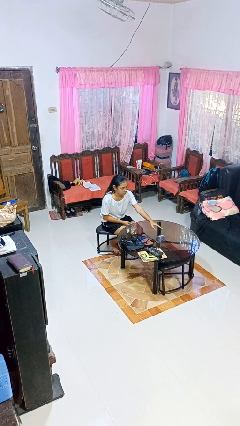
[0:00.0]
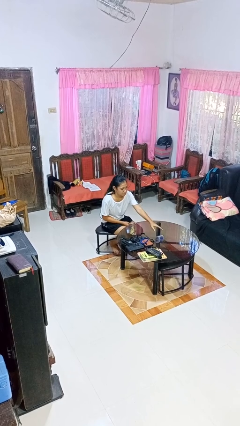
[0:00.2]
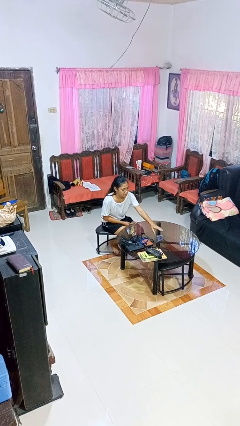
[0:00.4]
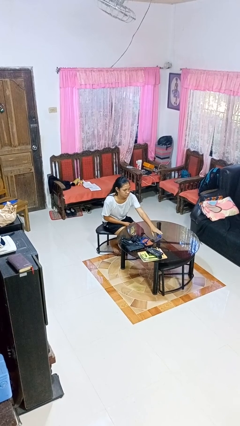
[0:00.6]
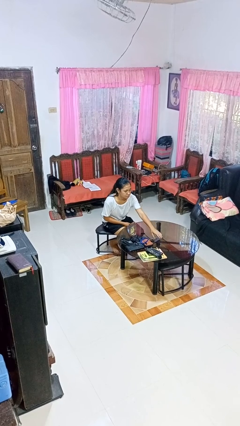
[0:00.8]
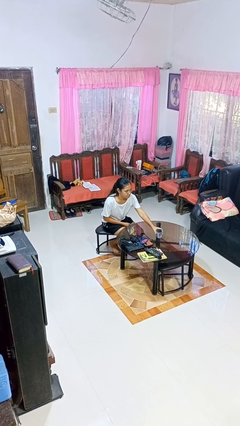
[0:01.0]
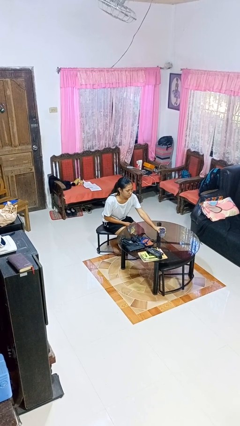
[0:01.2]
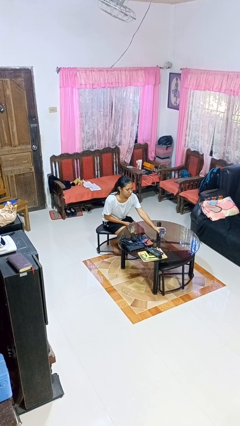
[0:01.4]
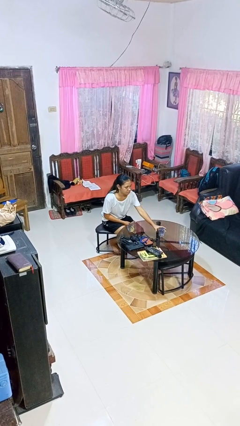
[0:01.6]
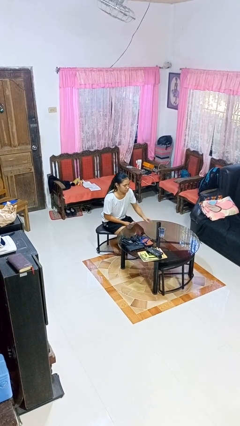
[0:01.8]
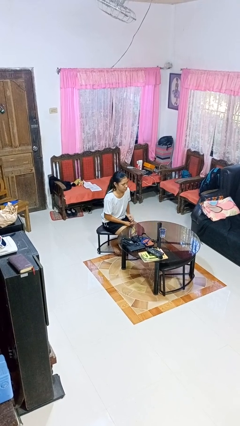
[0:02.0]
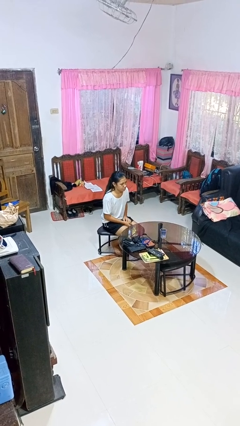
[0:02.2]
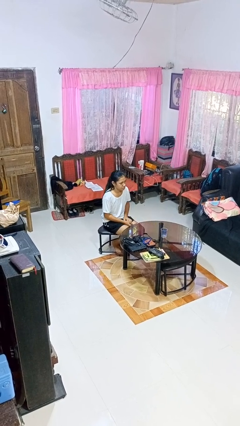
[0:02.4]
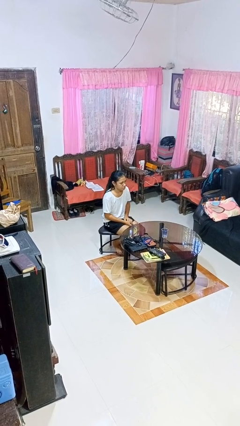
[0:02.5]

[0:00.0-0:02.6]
person sets upright glass

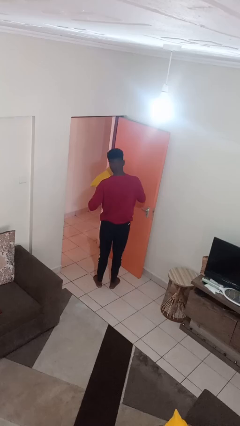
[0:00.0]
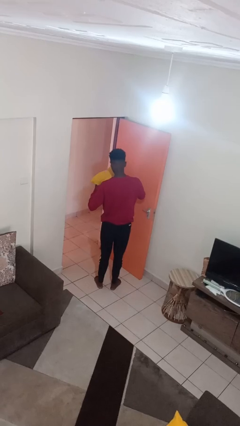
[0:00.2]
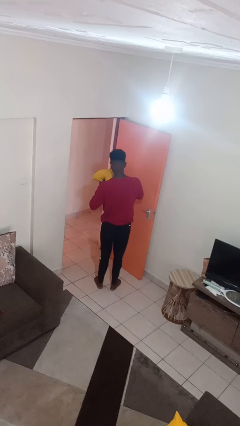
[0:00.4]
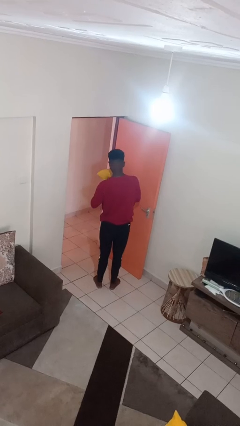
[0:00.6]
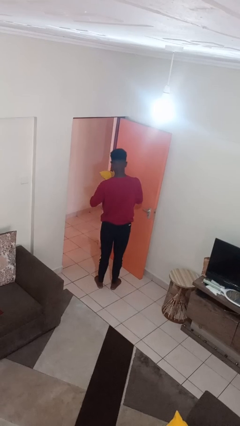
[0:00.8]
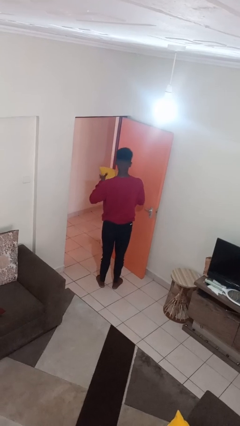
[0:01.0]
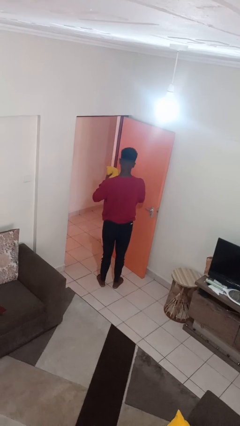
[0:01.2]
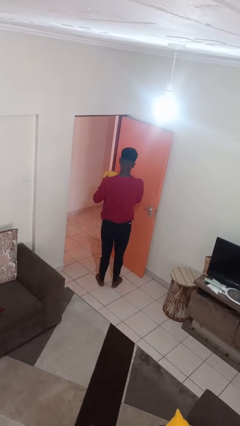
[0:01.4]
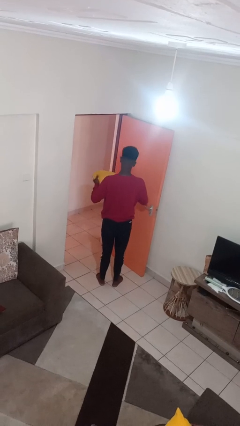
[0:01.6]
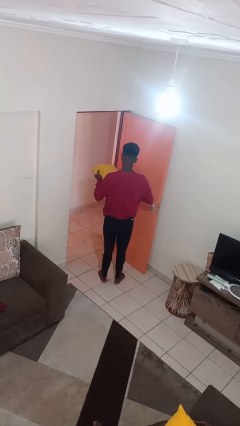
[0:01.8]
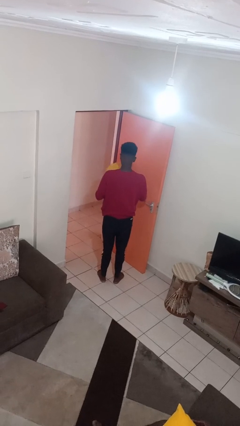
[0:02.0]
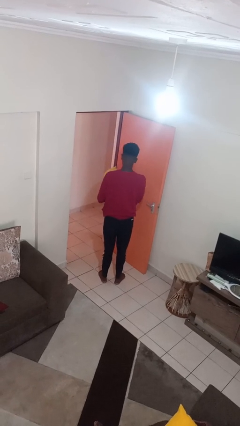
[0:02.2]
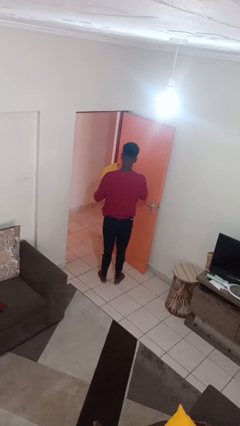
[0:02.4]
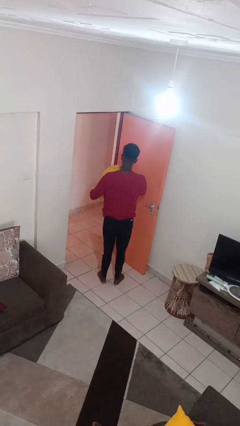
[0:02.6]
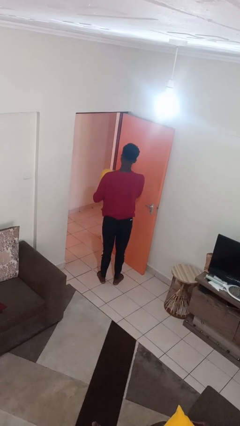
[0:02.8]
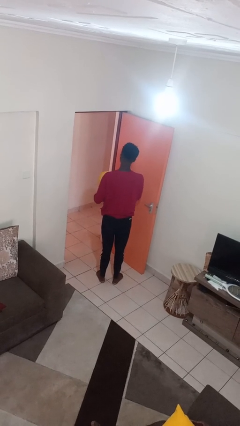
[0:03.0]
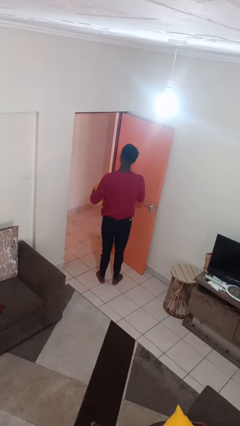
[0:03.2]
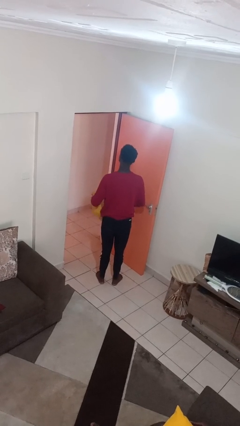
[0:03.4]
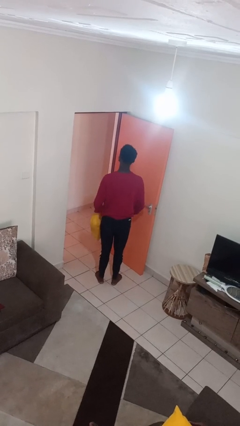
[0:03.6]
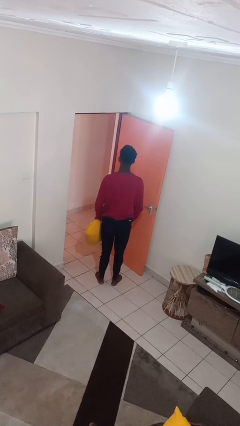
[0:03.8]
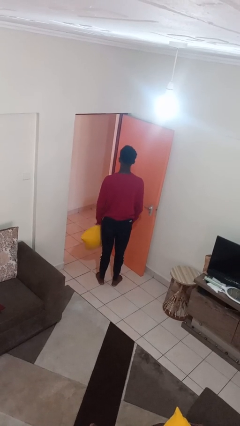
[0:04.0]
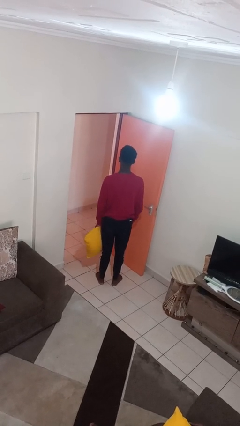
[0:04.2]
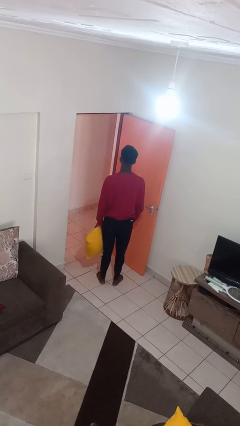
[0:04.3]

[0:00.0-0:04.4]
person squeezes object

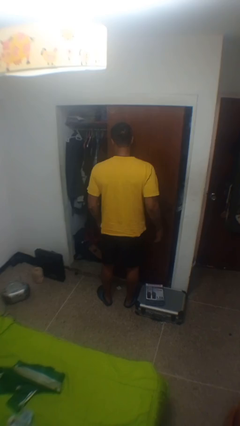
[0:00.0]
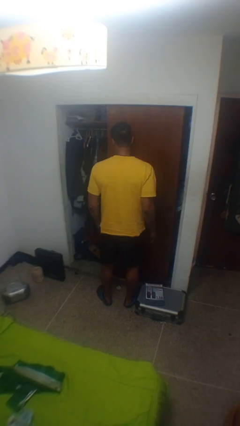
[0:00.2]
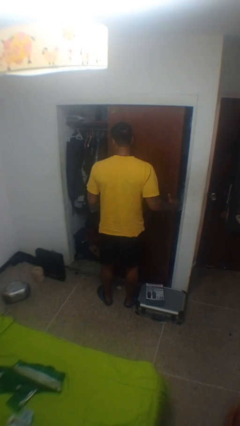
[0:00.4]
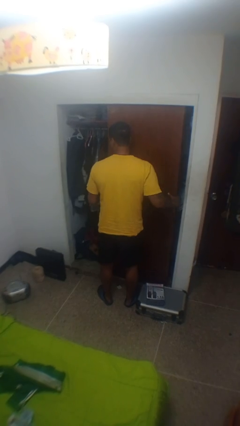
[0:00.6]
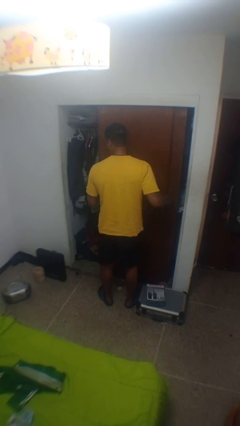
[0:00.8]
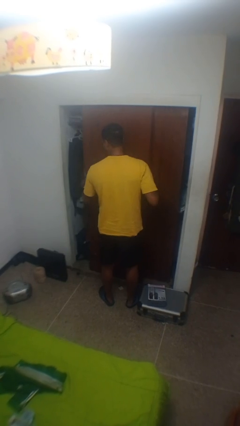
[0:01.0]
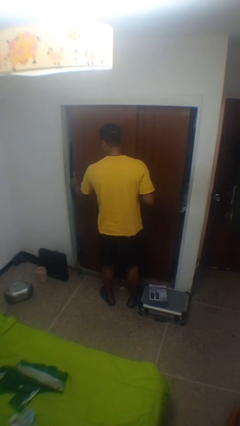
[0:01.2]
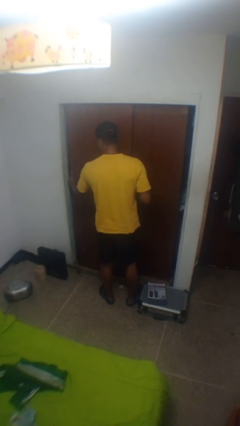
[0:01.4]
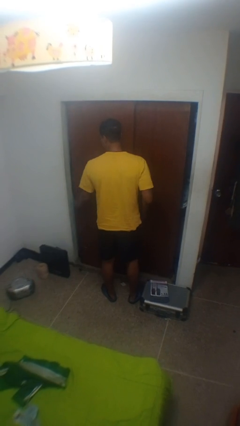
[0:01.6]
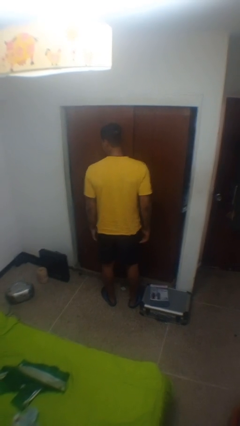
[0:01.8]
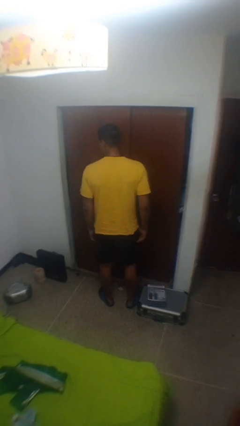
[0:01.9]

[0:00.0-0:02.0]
person closes closet door

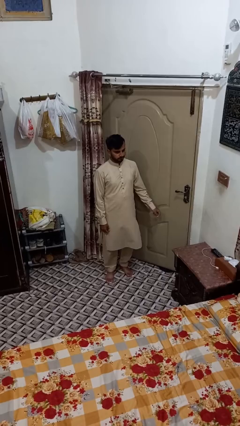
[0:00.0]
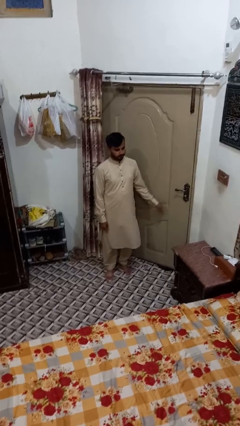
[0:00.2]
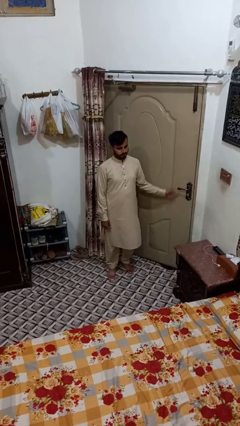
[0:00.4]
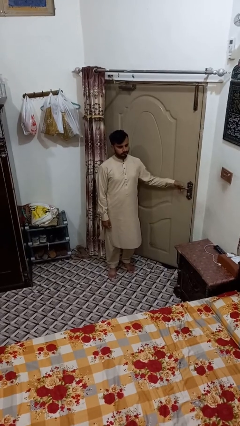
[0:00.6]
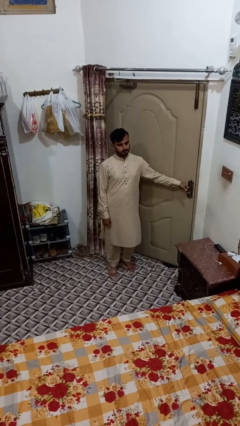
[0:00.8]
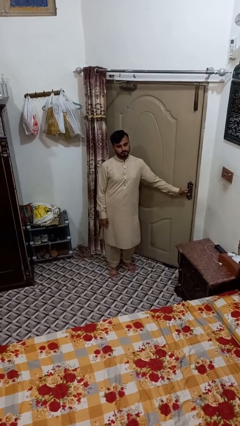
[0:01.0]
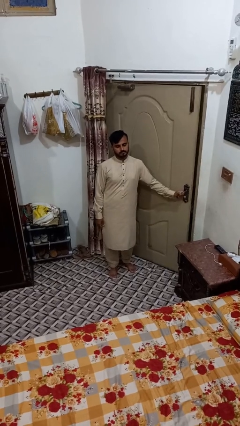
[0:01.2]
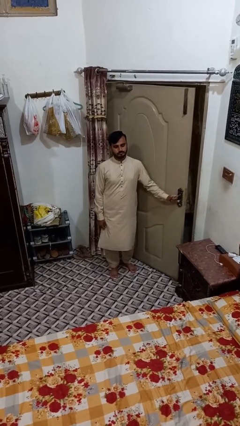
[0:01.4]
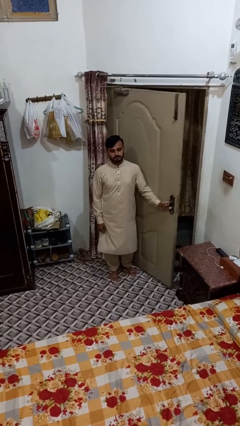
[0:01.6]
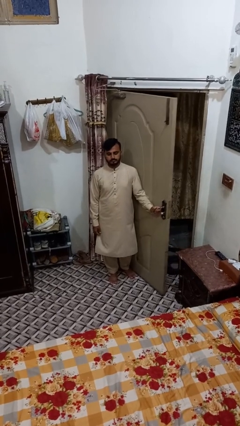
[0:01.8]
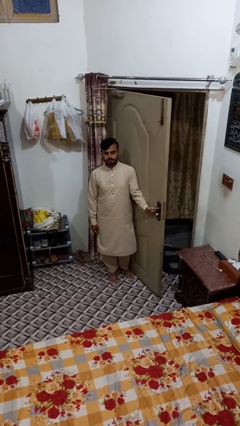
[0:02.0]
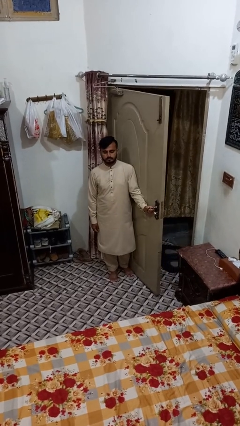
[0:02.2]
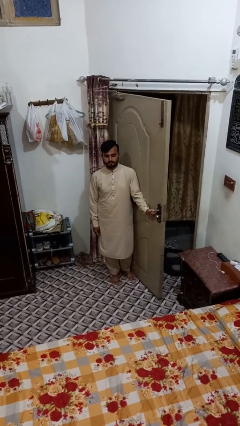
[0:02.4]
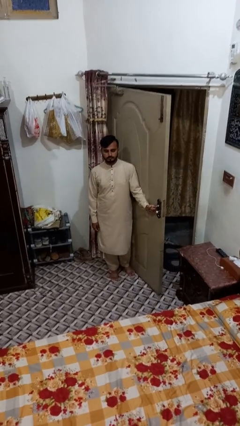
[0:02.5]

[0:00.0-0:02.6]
person opens closet door

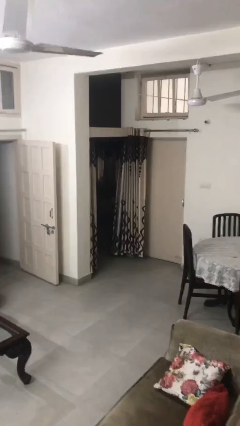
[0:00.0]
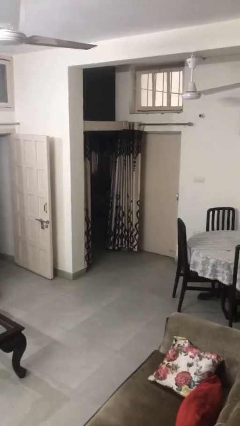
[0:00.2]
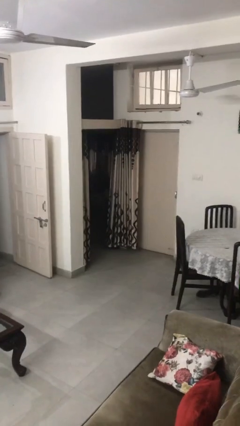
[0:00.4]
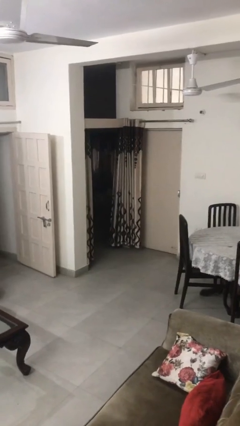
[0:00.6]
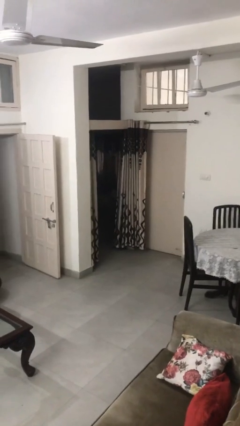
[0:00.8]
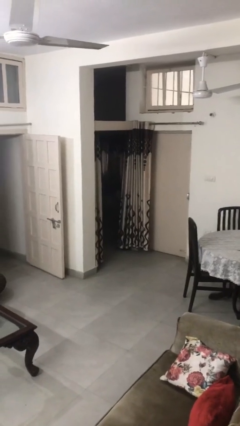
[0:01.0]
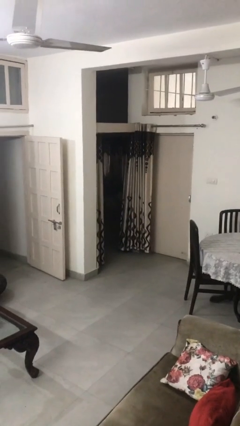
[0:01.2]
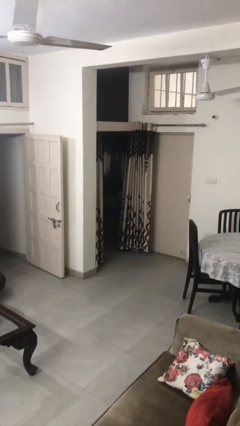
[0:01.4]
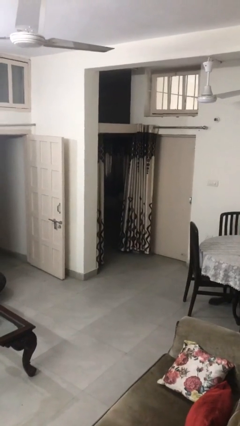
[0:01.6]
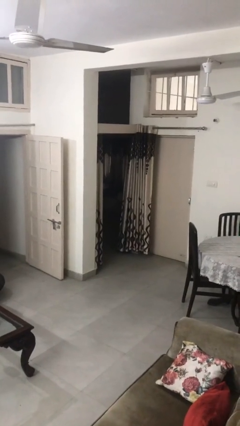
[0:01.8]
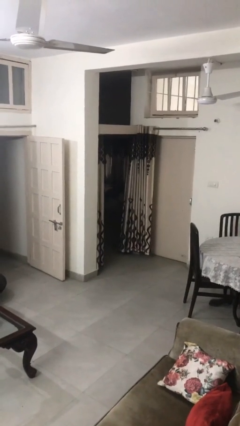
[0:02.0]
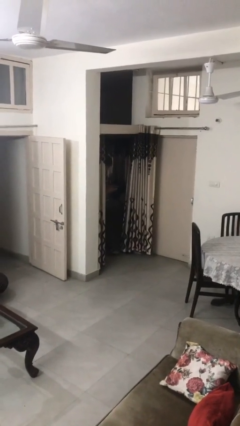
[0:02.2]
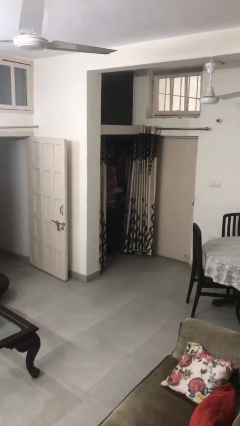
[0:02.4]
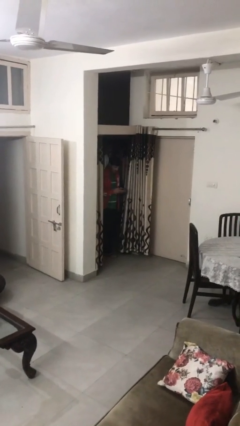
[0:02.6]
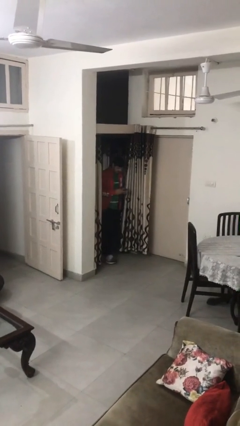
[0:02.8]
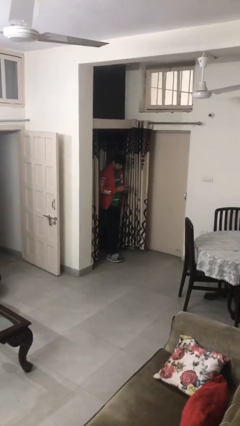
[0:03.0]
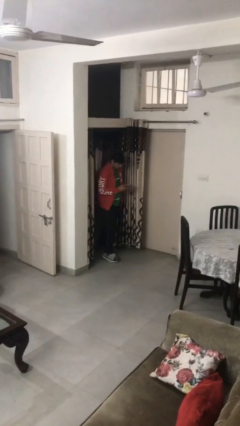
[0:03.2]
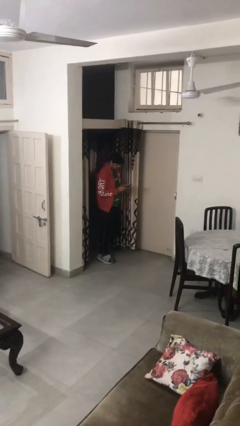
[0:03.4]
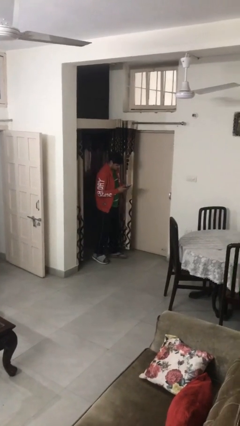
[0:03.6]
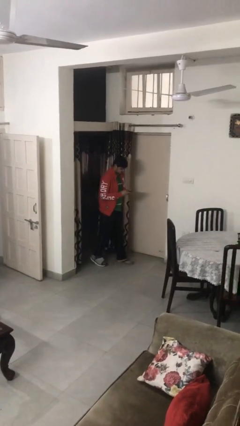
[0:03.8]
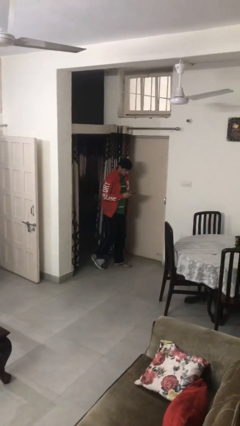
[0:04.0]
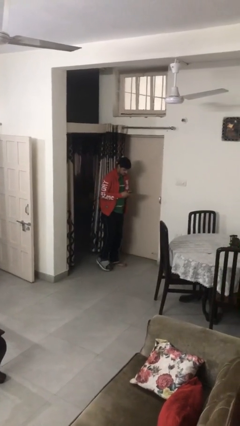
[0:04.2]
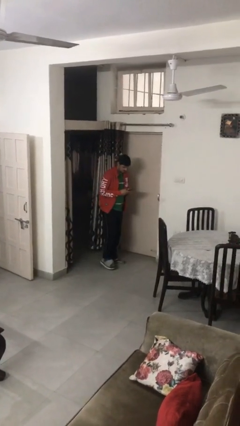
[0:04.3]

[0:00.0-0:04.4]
person enters scene through structure

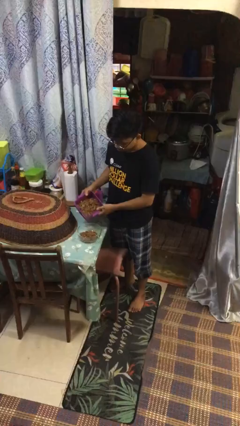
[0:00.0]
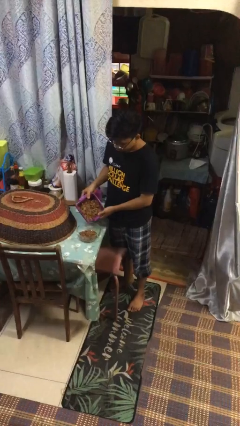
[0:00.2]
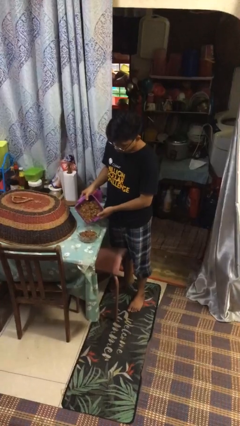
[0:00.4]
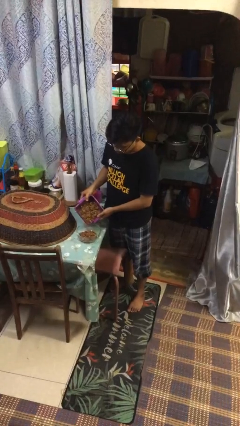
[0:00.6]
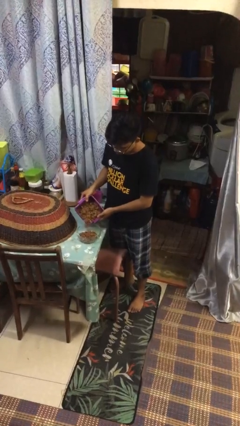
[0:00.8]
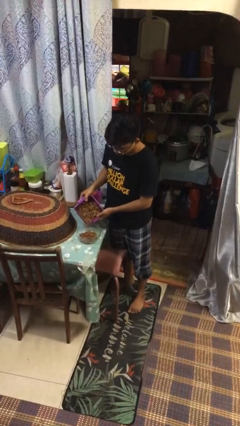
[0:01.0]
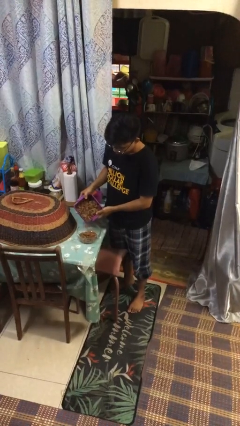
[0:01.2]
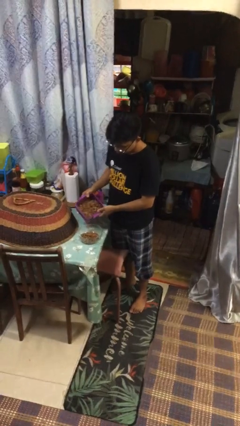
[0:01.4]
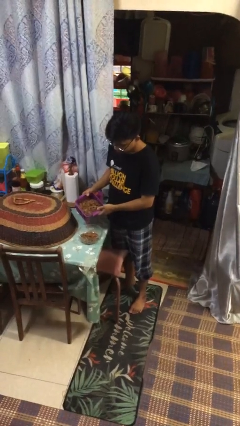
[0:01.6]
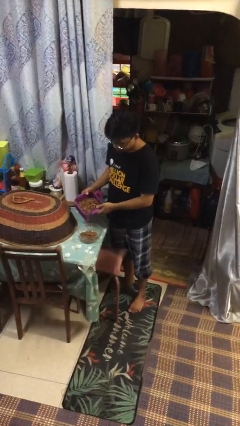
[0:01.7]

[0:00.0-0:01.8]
person pours into bowl
